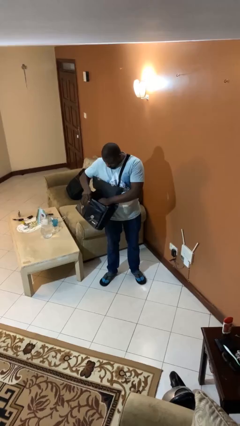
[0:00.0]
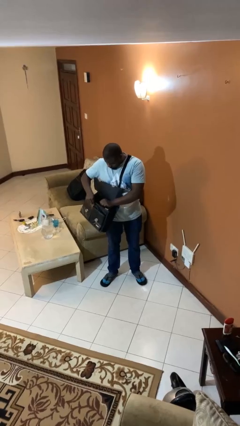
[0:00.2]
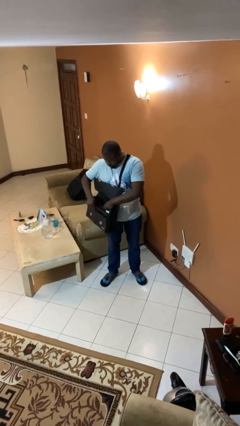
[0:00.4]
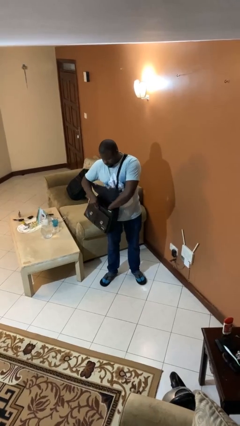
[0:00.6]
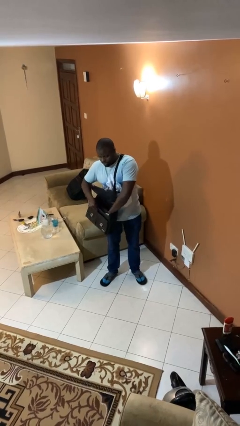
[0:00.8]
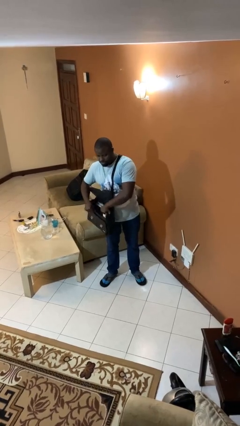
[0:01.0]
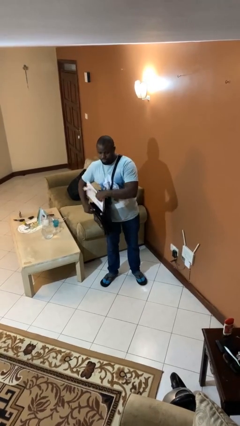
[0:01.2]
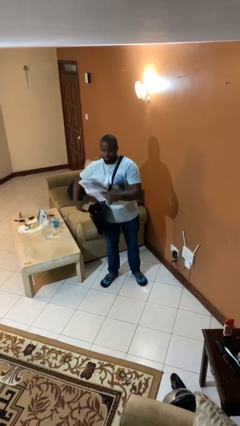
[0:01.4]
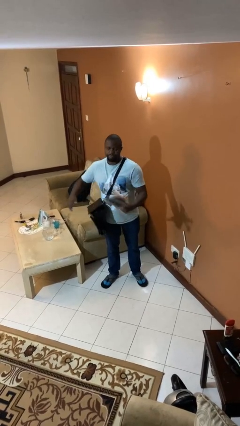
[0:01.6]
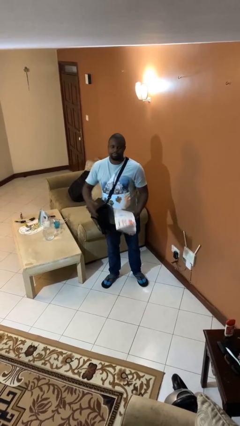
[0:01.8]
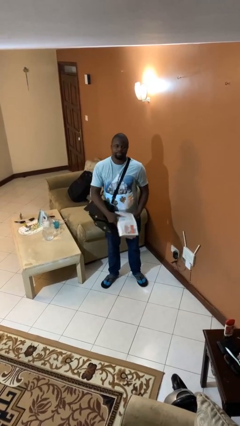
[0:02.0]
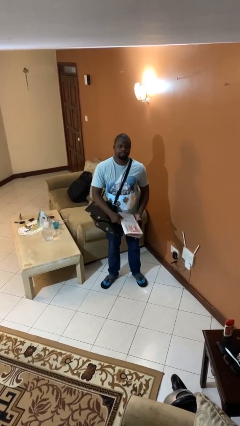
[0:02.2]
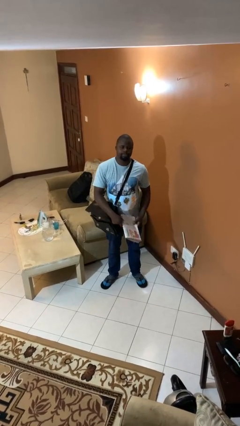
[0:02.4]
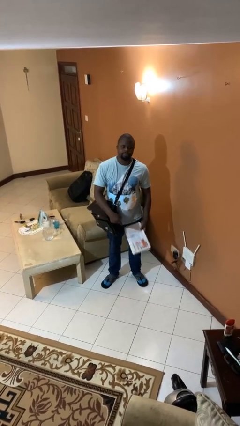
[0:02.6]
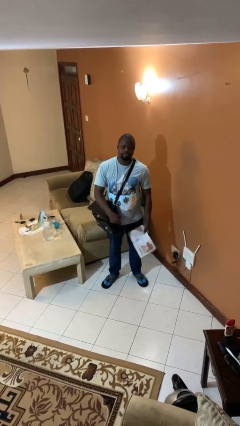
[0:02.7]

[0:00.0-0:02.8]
person takes object from purse

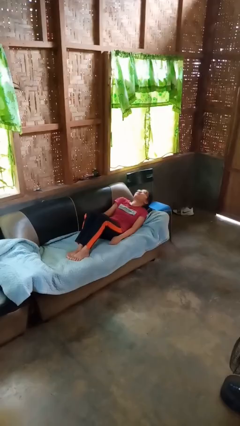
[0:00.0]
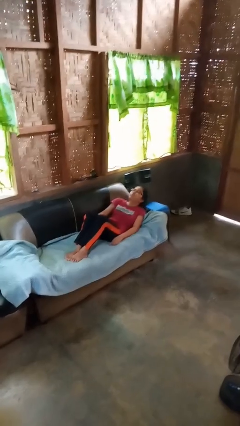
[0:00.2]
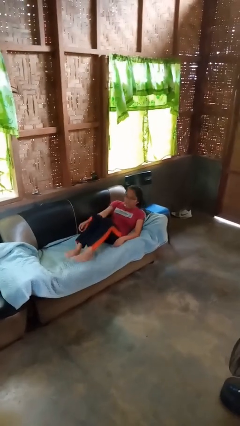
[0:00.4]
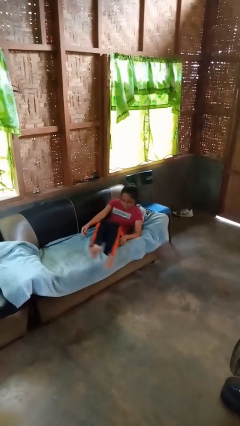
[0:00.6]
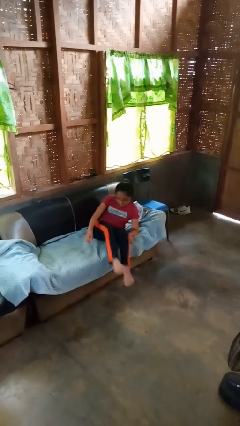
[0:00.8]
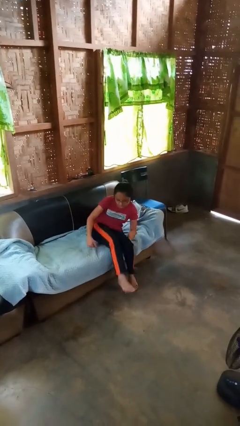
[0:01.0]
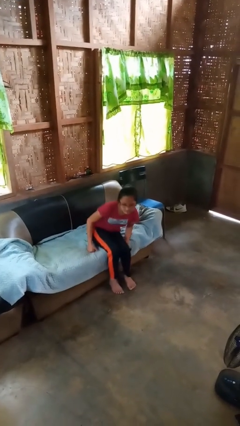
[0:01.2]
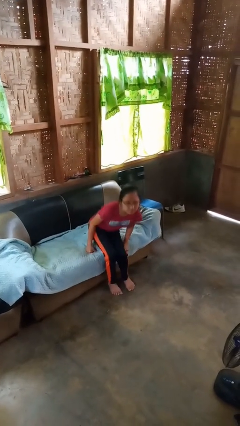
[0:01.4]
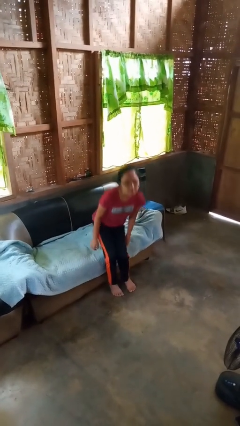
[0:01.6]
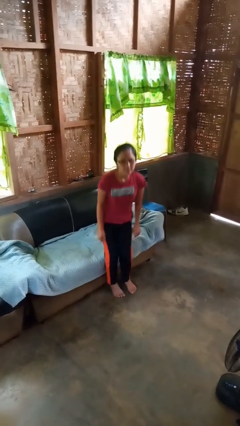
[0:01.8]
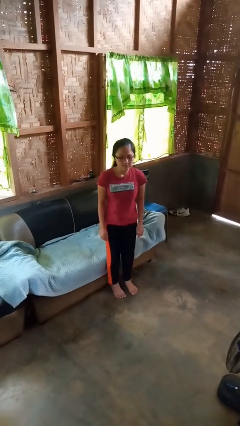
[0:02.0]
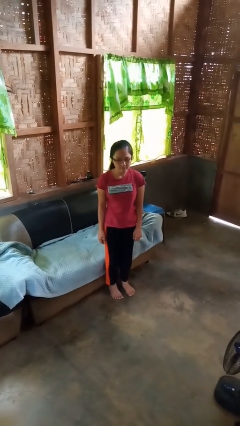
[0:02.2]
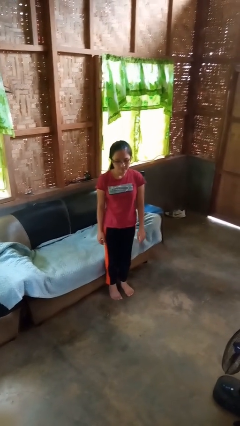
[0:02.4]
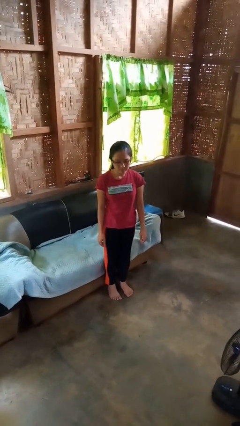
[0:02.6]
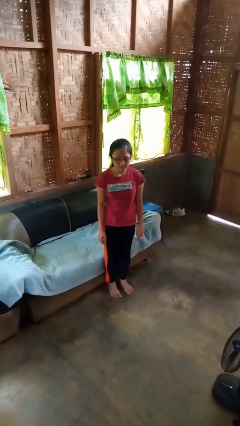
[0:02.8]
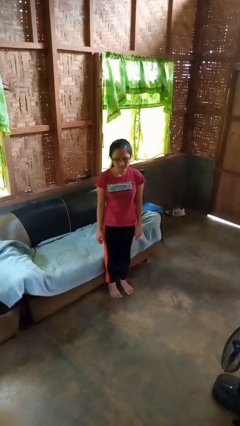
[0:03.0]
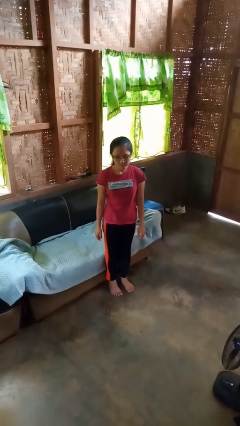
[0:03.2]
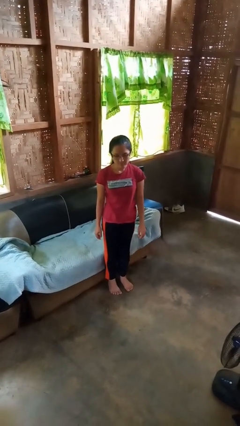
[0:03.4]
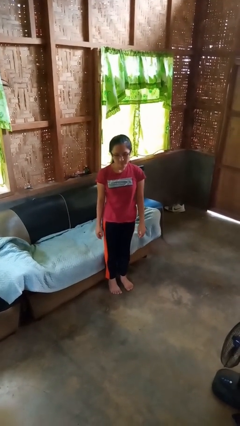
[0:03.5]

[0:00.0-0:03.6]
person stands up

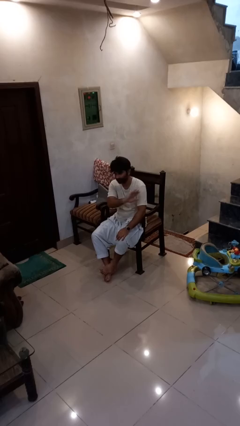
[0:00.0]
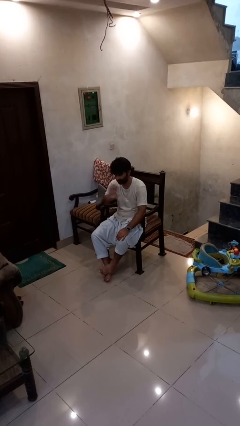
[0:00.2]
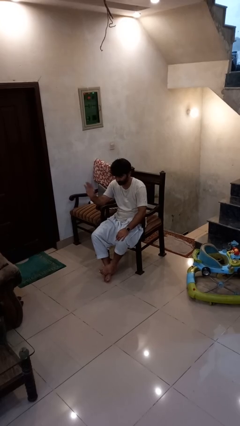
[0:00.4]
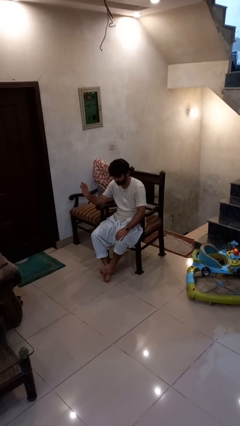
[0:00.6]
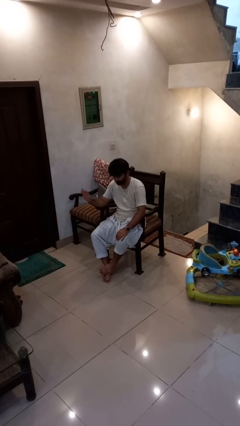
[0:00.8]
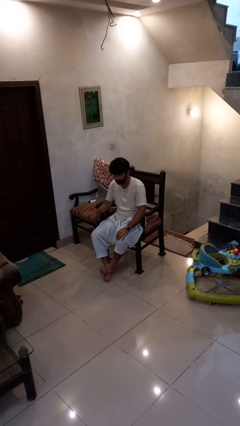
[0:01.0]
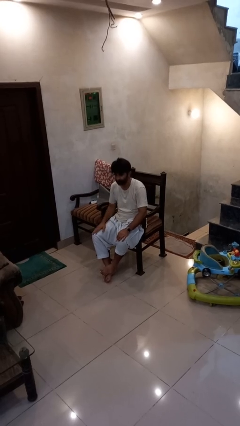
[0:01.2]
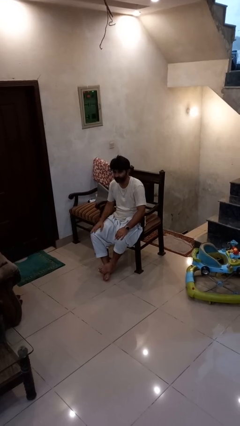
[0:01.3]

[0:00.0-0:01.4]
person gestures swipe right

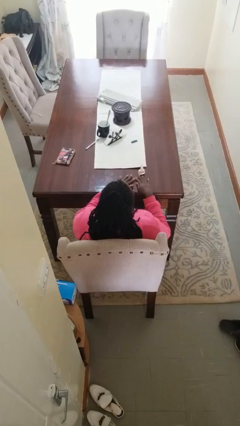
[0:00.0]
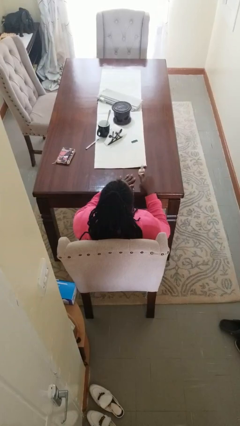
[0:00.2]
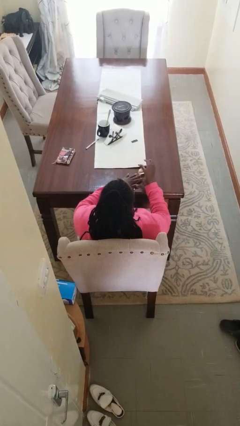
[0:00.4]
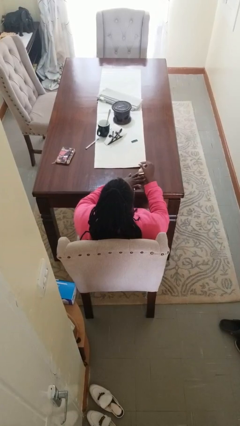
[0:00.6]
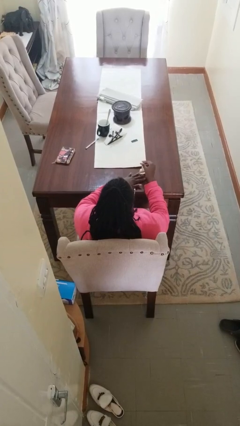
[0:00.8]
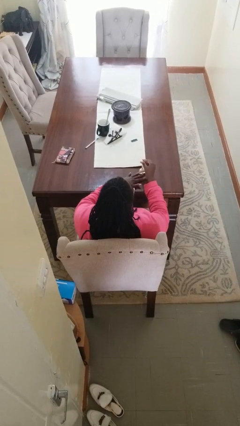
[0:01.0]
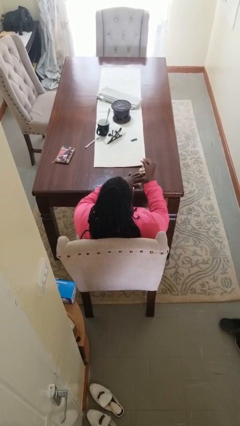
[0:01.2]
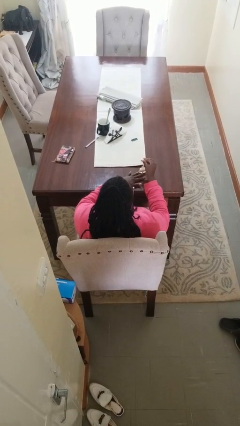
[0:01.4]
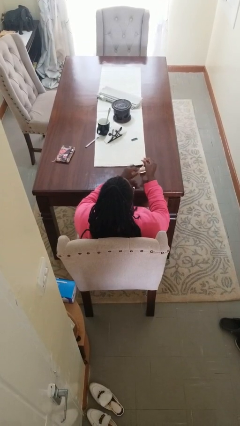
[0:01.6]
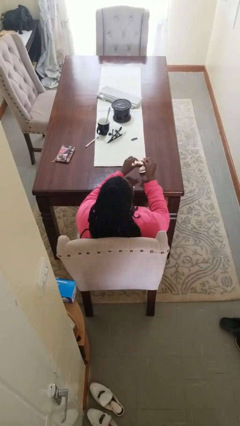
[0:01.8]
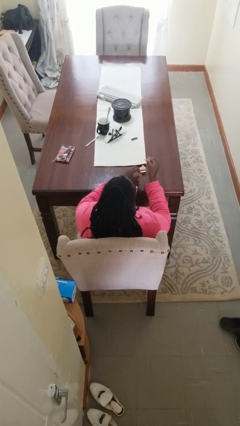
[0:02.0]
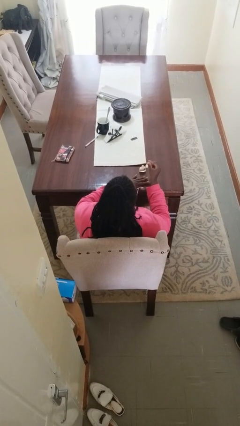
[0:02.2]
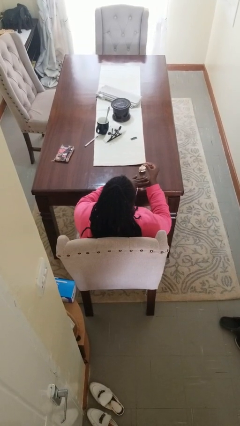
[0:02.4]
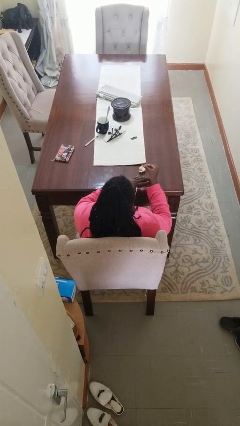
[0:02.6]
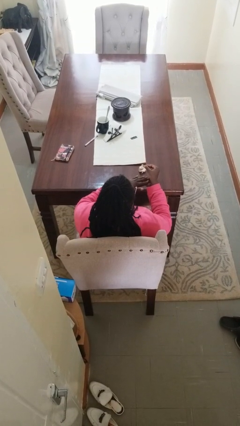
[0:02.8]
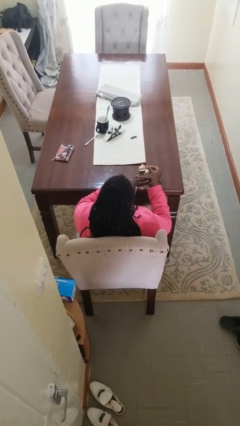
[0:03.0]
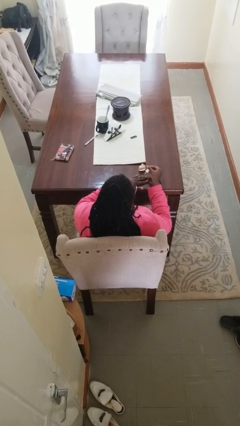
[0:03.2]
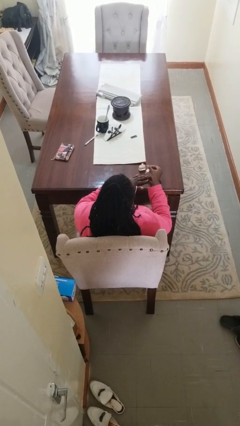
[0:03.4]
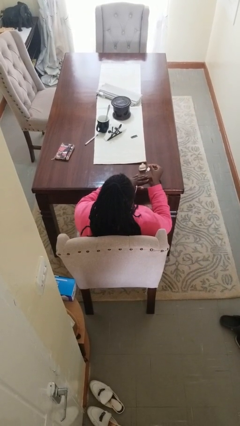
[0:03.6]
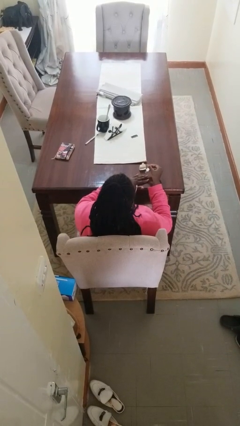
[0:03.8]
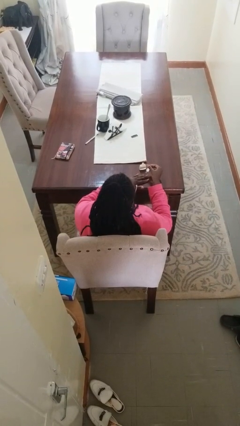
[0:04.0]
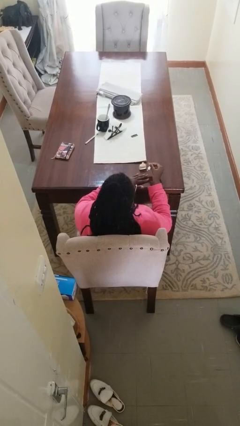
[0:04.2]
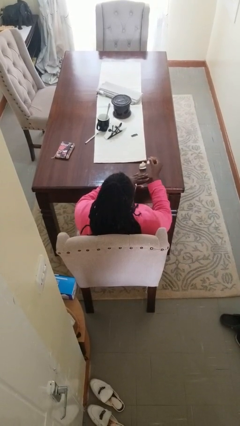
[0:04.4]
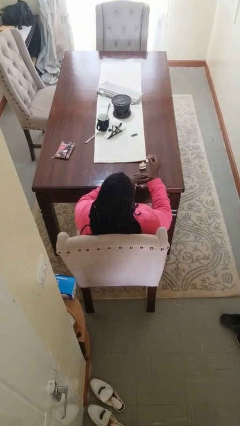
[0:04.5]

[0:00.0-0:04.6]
person paints fingernails

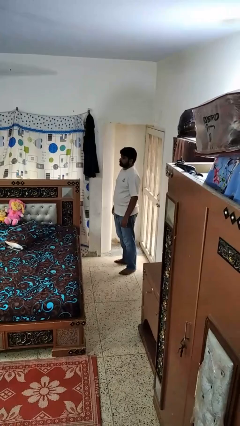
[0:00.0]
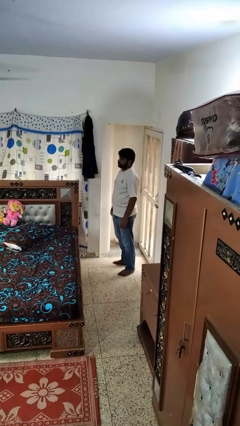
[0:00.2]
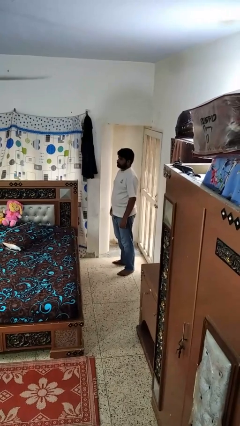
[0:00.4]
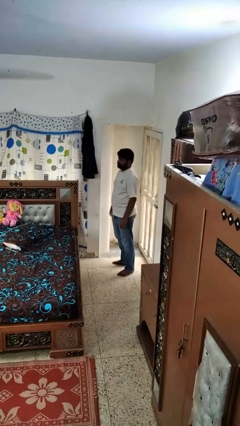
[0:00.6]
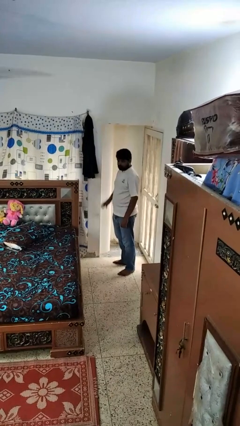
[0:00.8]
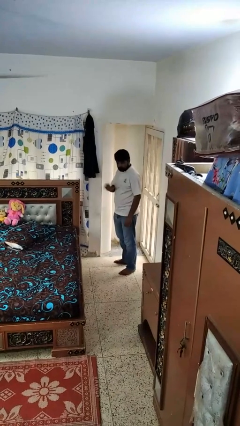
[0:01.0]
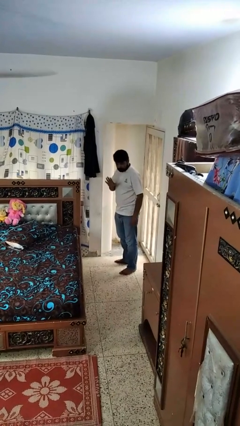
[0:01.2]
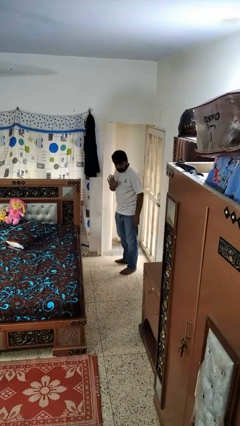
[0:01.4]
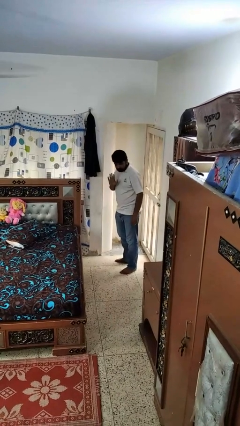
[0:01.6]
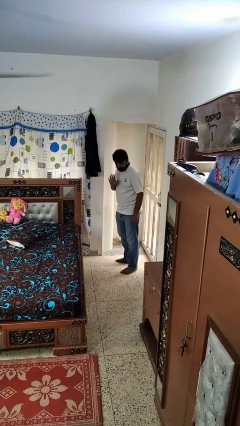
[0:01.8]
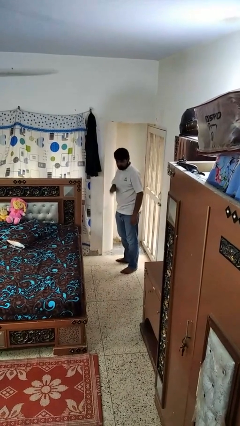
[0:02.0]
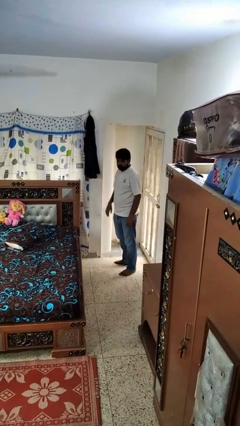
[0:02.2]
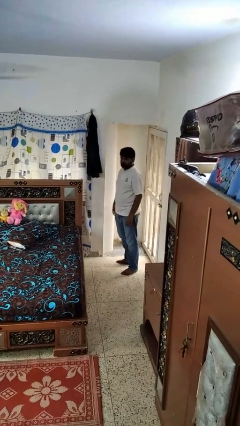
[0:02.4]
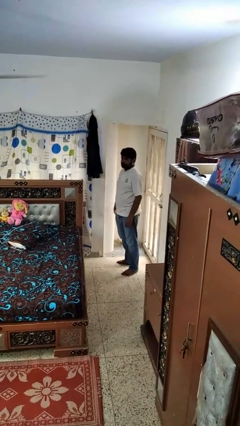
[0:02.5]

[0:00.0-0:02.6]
person waves at person

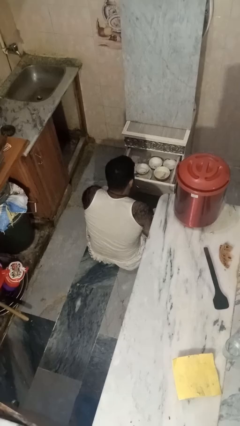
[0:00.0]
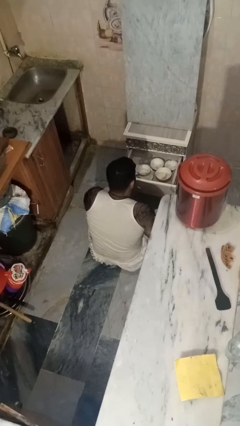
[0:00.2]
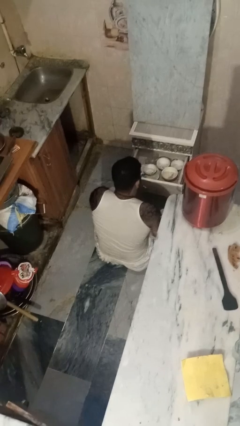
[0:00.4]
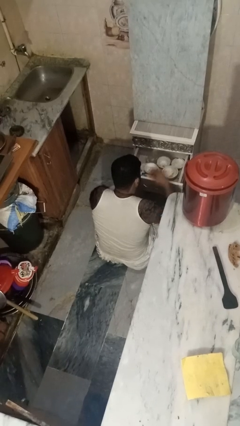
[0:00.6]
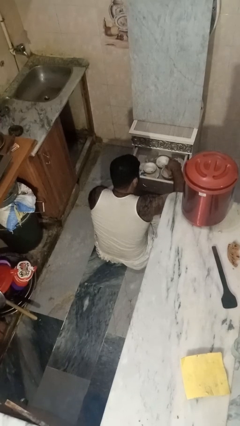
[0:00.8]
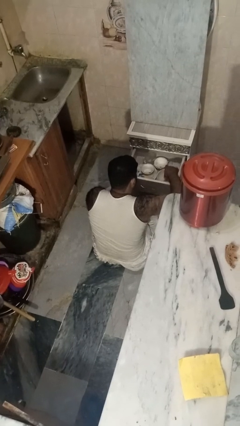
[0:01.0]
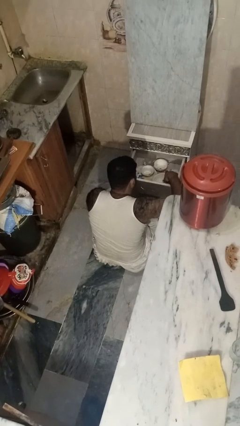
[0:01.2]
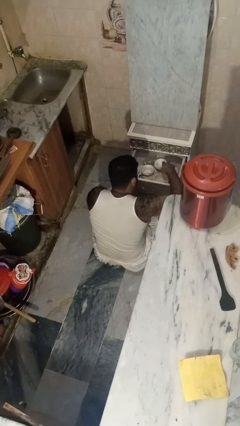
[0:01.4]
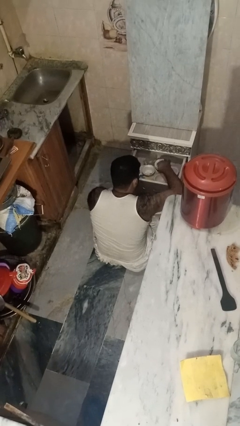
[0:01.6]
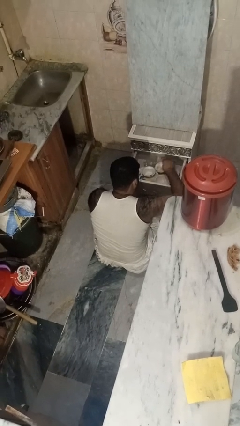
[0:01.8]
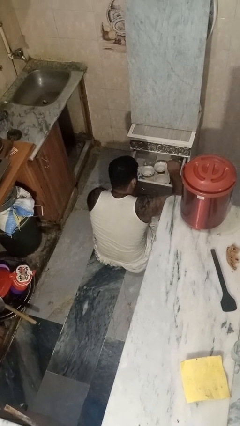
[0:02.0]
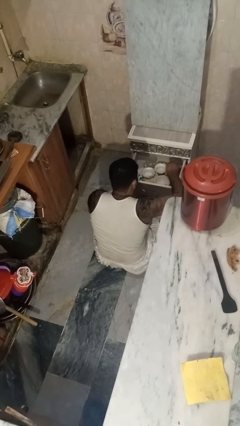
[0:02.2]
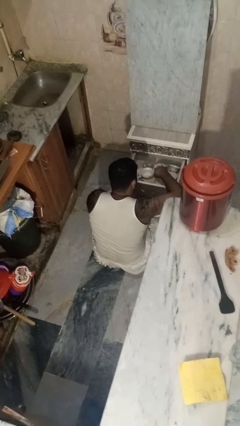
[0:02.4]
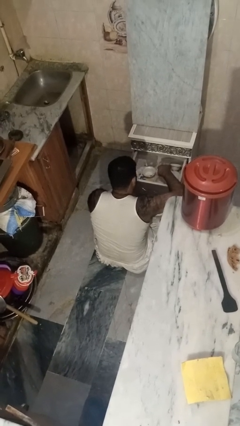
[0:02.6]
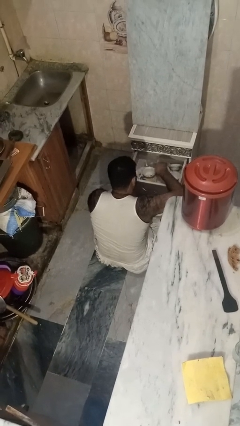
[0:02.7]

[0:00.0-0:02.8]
person searches in kitchen drawer
